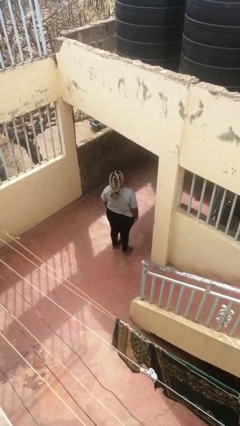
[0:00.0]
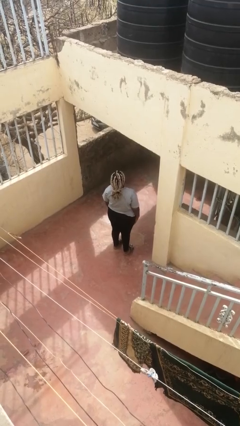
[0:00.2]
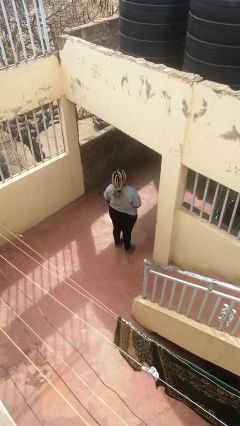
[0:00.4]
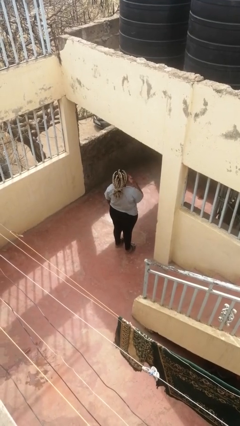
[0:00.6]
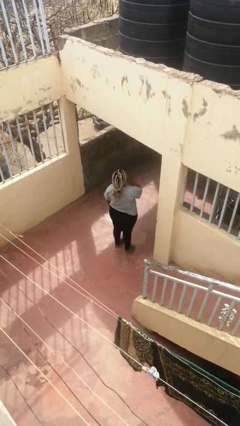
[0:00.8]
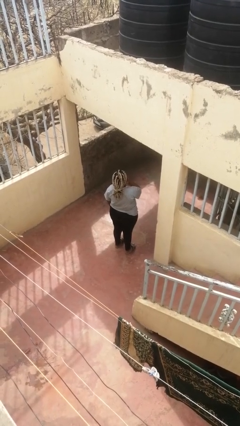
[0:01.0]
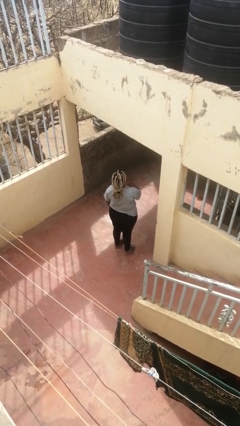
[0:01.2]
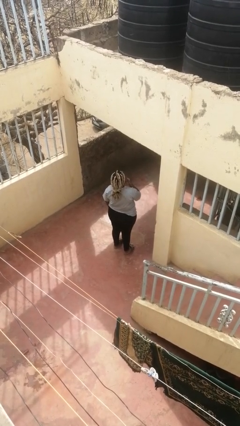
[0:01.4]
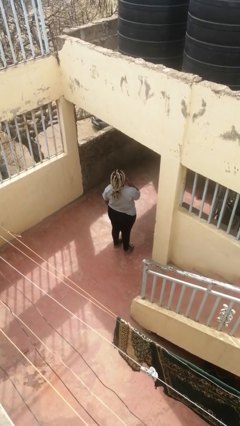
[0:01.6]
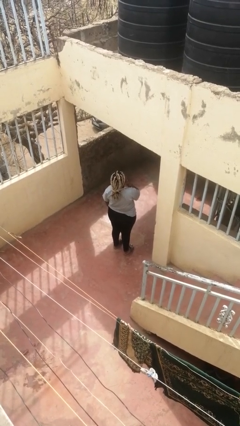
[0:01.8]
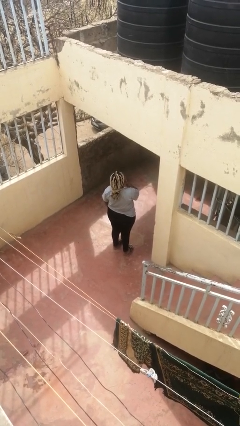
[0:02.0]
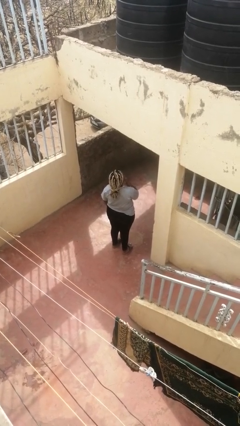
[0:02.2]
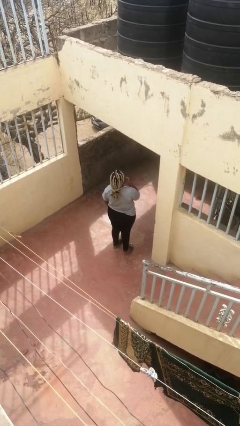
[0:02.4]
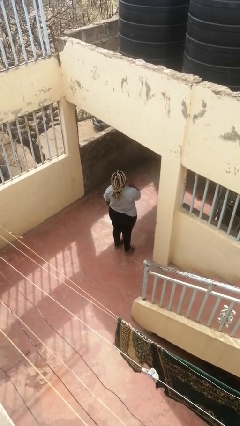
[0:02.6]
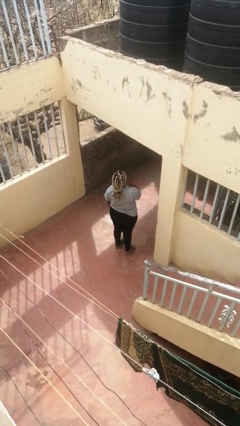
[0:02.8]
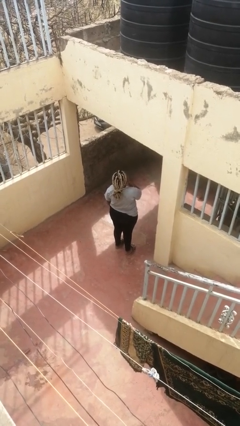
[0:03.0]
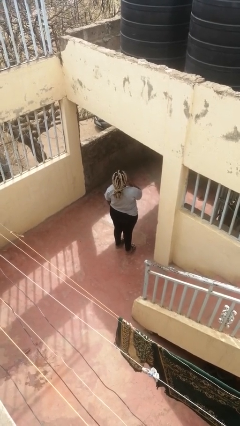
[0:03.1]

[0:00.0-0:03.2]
person strokes chin

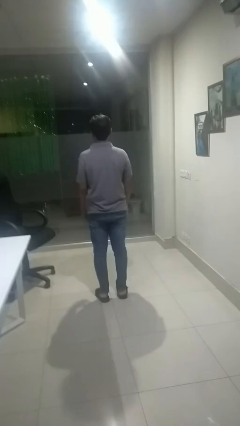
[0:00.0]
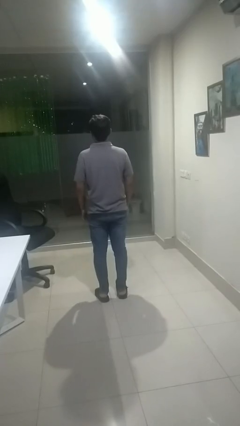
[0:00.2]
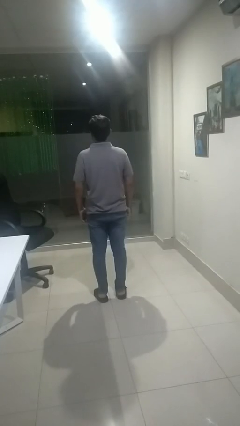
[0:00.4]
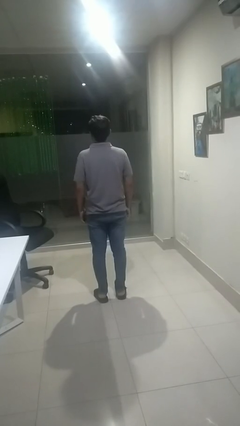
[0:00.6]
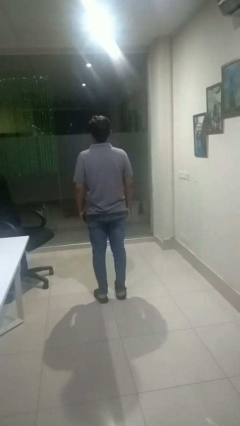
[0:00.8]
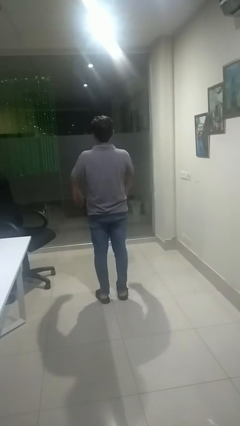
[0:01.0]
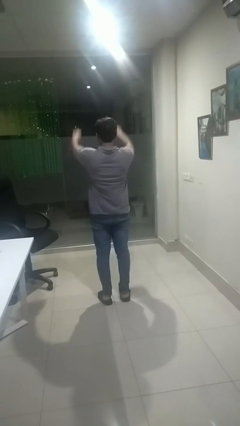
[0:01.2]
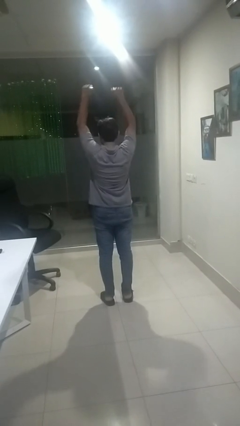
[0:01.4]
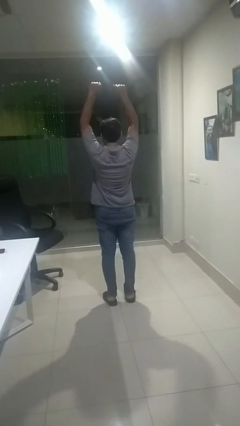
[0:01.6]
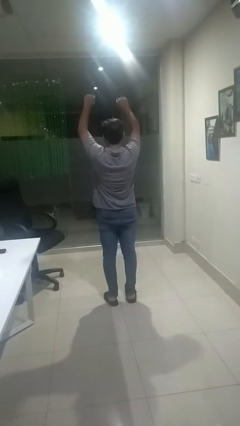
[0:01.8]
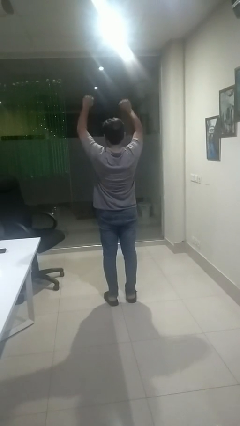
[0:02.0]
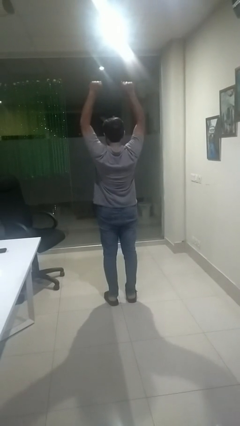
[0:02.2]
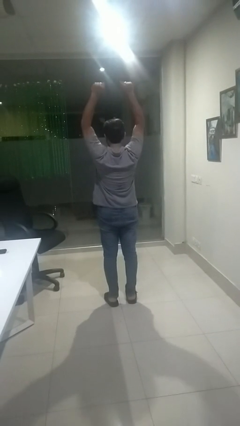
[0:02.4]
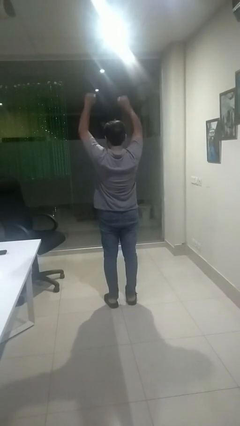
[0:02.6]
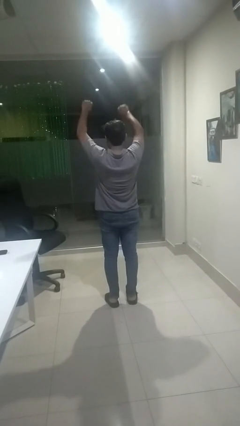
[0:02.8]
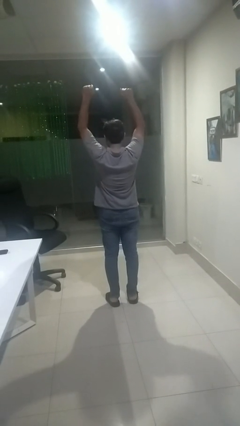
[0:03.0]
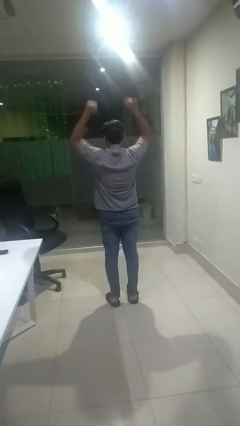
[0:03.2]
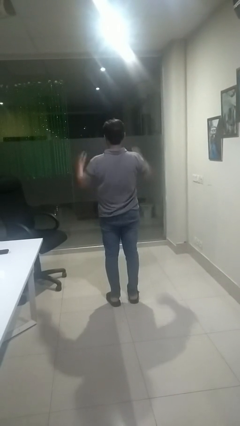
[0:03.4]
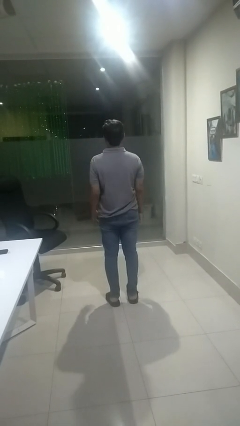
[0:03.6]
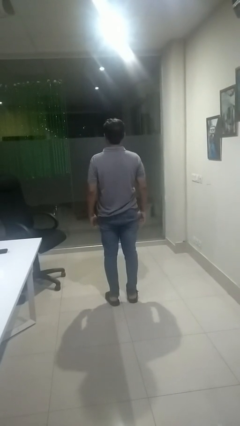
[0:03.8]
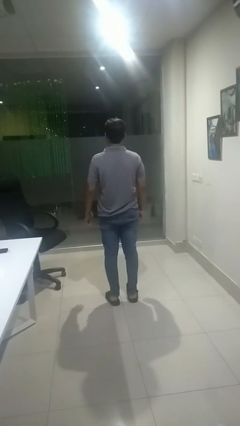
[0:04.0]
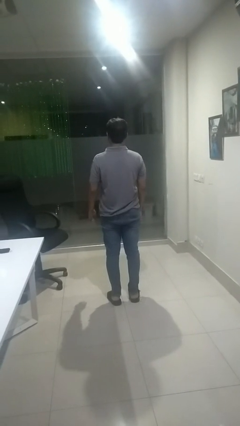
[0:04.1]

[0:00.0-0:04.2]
person stretches arms over head

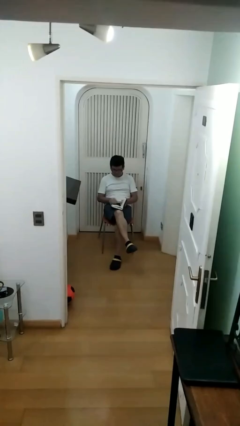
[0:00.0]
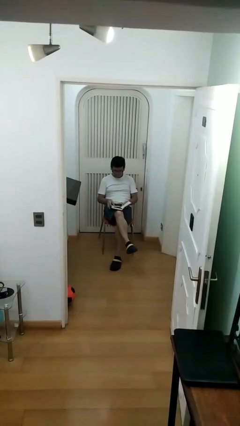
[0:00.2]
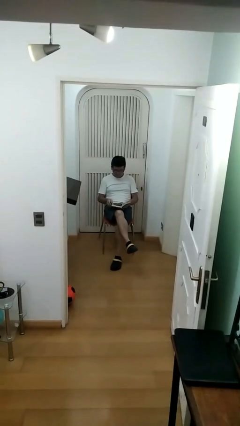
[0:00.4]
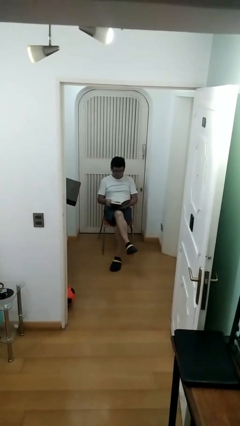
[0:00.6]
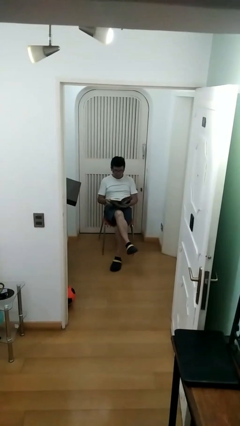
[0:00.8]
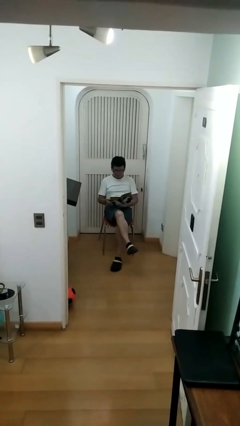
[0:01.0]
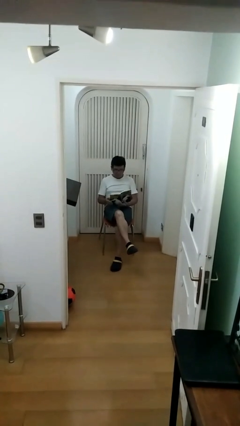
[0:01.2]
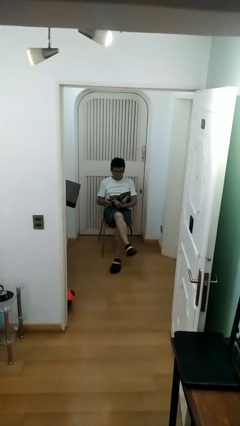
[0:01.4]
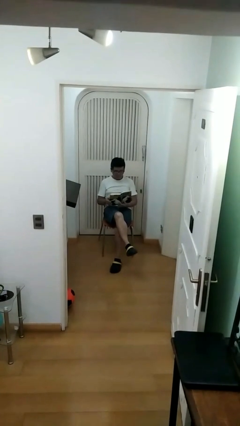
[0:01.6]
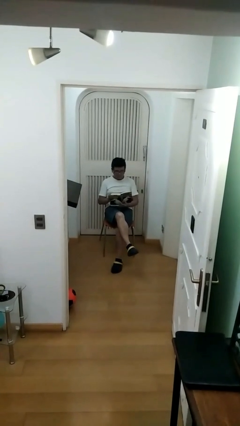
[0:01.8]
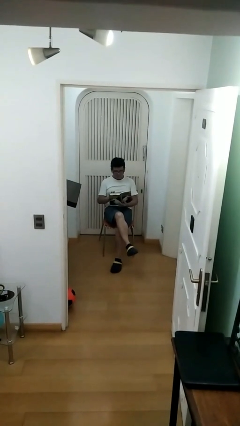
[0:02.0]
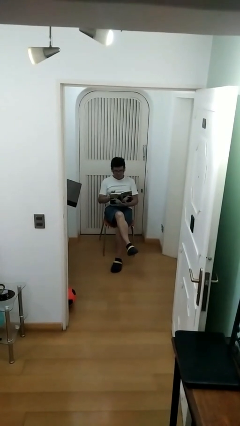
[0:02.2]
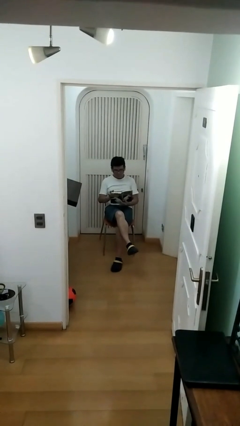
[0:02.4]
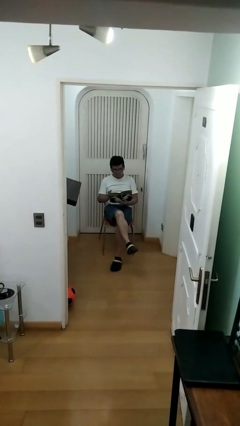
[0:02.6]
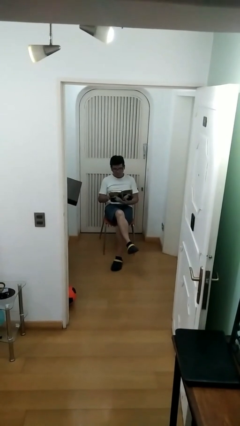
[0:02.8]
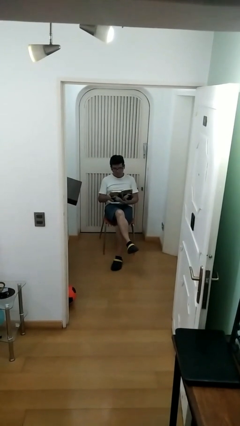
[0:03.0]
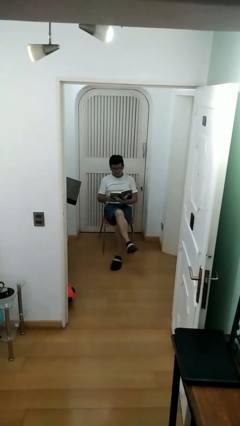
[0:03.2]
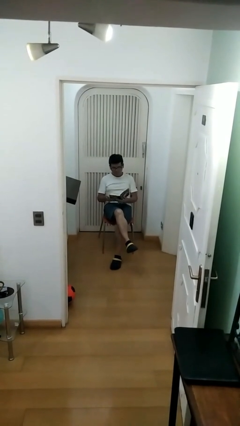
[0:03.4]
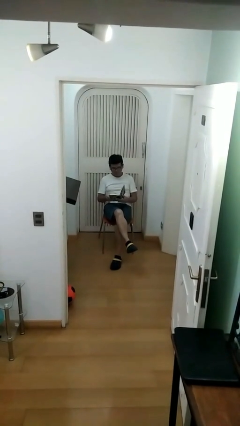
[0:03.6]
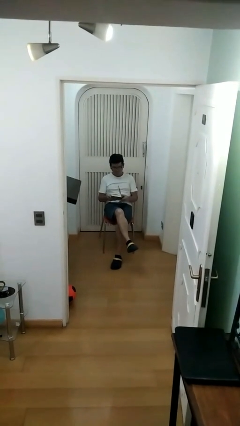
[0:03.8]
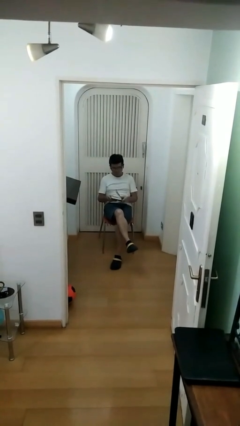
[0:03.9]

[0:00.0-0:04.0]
person reads document

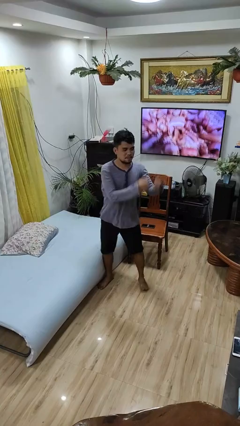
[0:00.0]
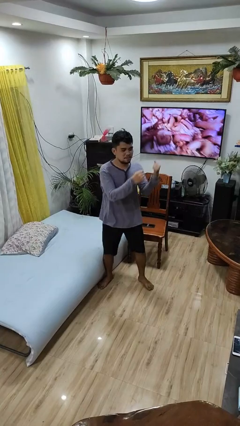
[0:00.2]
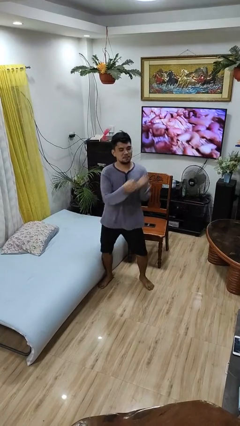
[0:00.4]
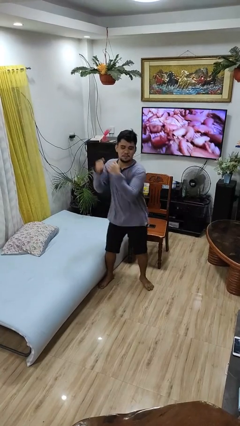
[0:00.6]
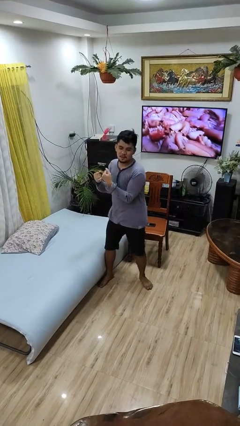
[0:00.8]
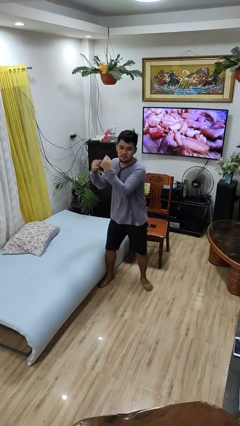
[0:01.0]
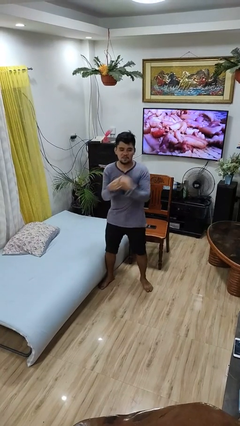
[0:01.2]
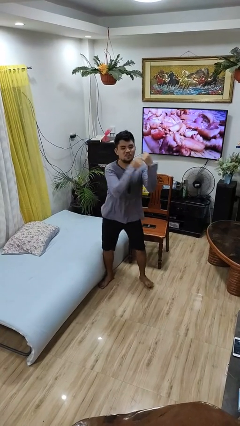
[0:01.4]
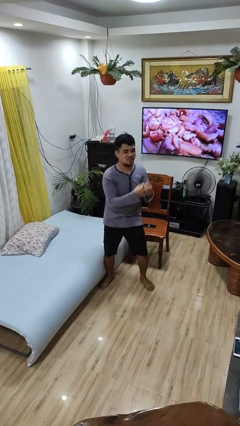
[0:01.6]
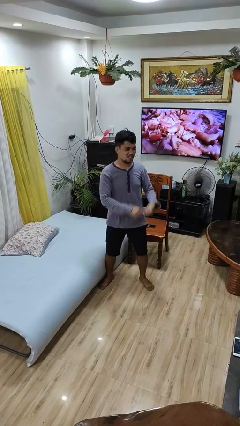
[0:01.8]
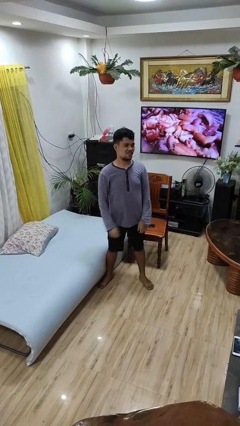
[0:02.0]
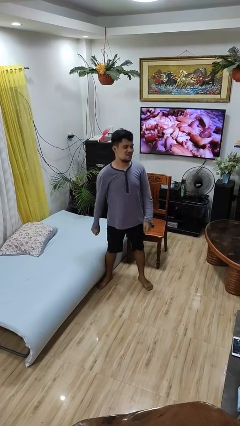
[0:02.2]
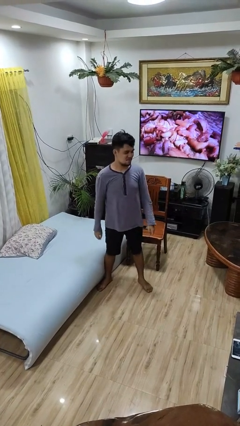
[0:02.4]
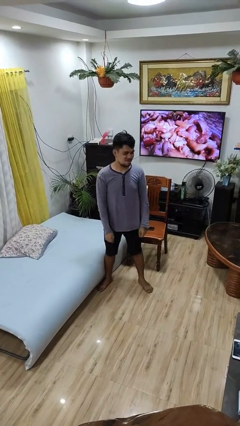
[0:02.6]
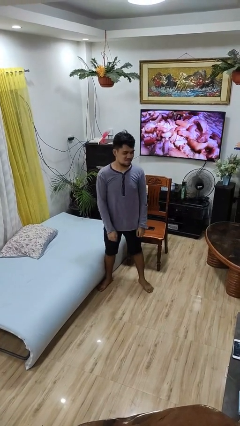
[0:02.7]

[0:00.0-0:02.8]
person dances in place

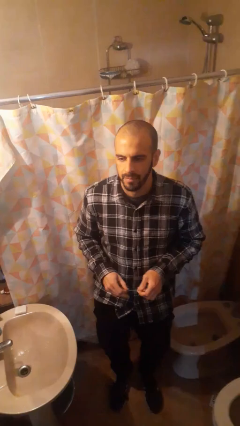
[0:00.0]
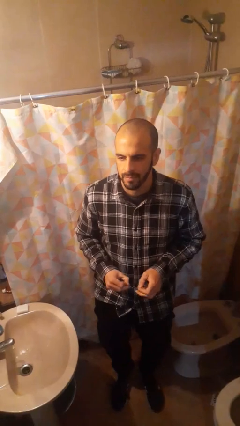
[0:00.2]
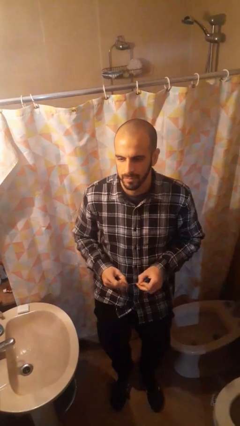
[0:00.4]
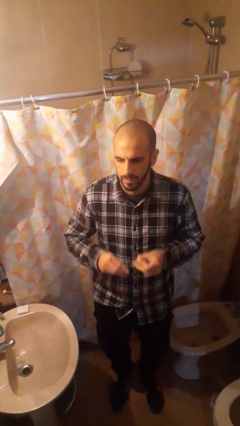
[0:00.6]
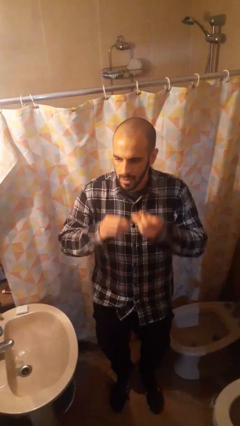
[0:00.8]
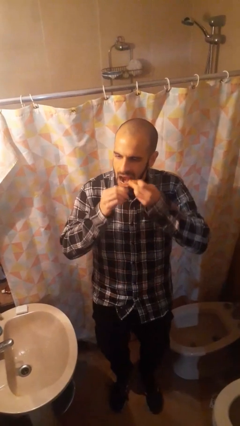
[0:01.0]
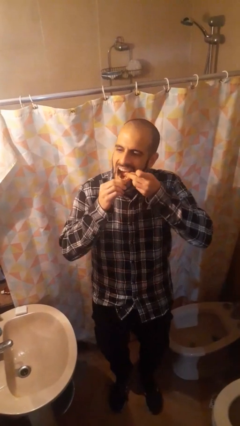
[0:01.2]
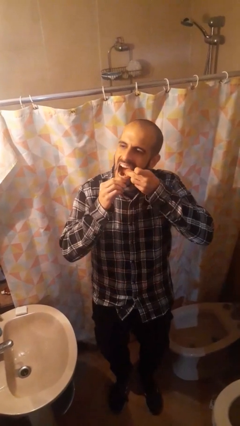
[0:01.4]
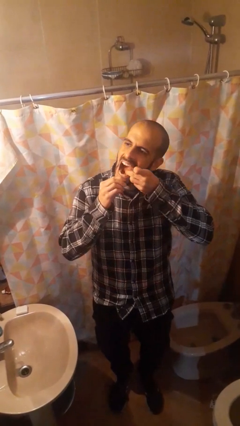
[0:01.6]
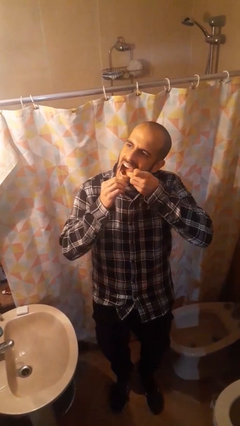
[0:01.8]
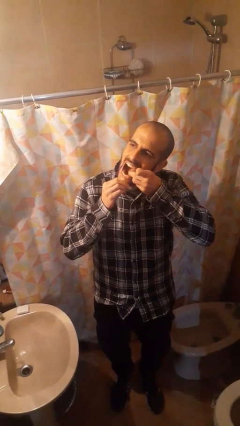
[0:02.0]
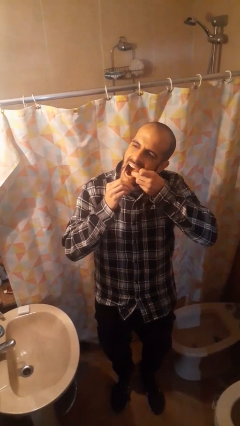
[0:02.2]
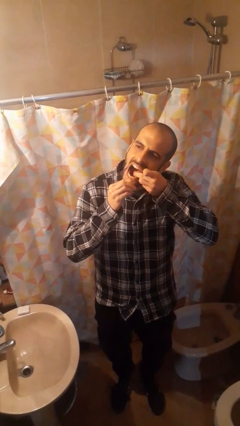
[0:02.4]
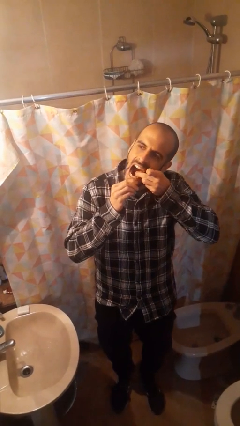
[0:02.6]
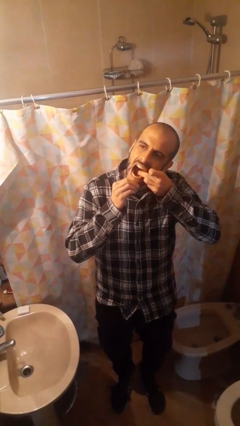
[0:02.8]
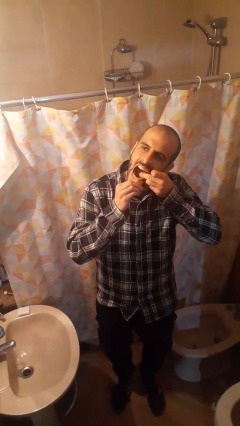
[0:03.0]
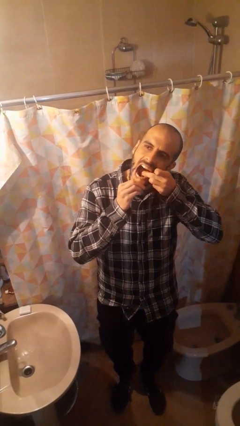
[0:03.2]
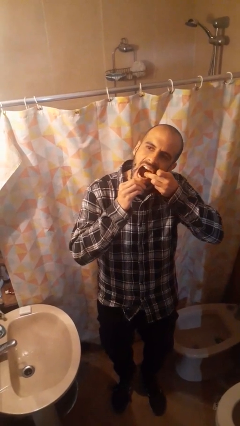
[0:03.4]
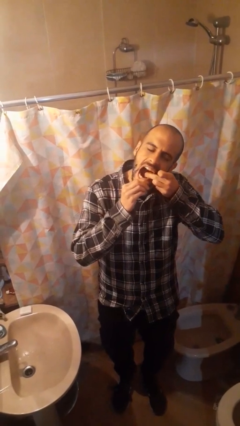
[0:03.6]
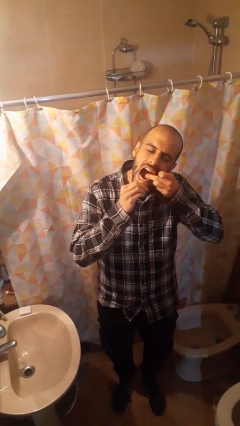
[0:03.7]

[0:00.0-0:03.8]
person flosses
